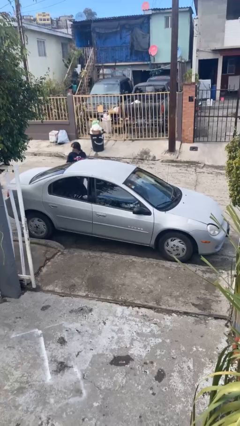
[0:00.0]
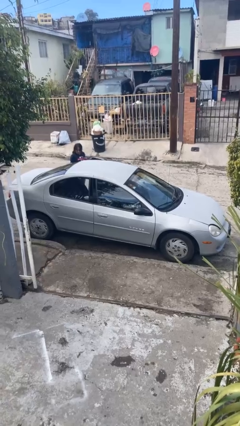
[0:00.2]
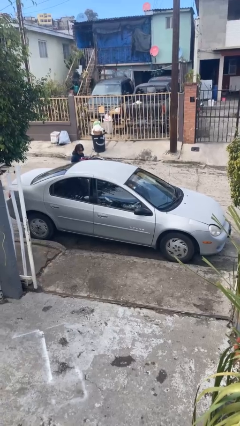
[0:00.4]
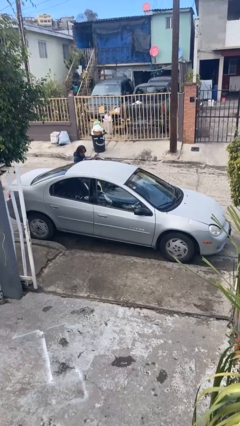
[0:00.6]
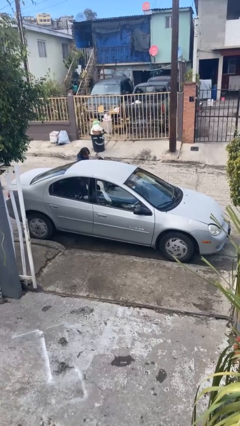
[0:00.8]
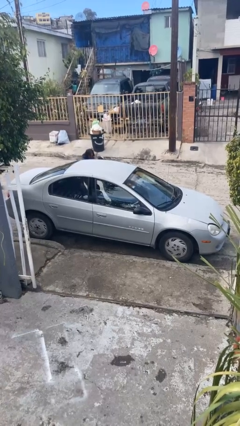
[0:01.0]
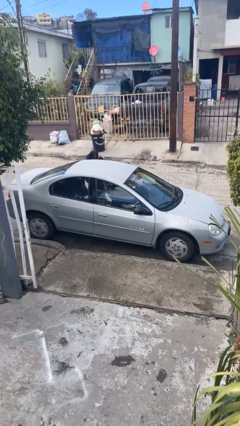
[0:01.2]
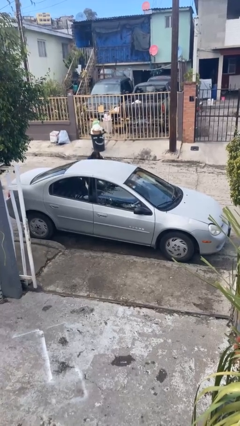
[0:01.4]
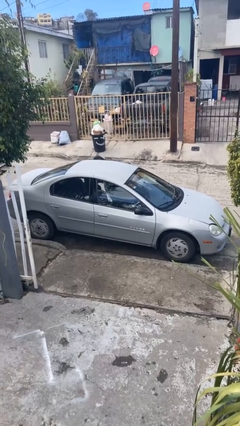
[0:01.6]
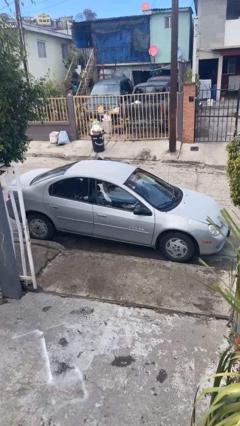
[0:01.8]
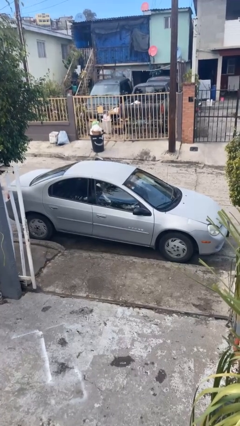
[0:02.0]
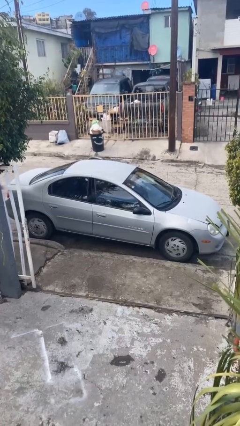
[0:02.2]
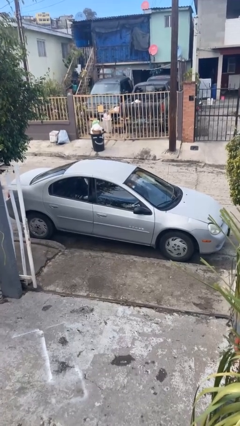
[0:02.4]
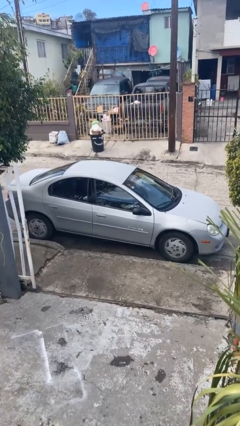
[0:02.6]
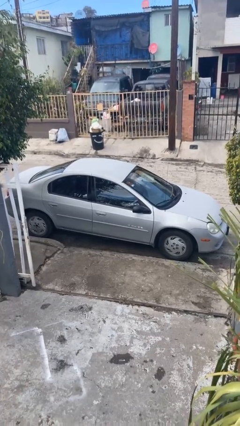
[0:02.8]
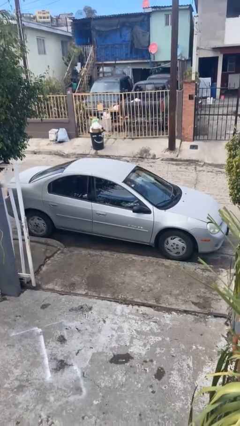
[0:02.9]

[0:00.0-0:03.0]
car picks up person

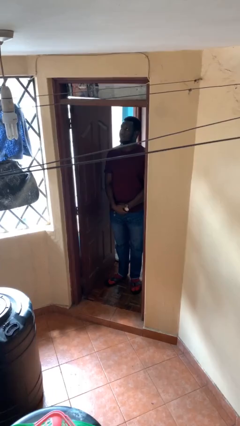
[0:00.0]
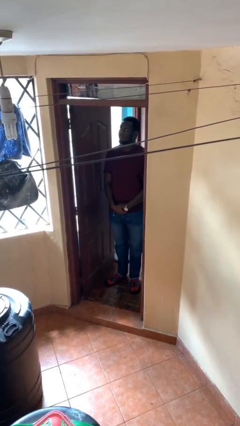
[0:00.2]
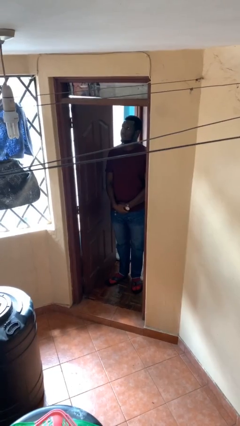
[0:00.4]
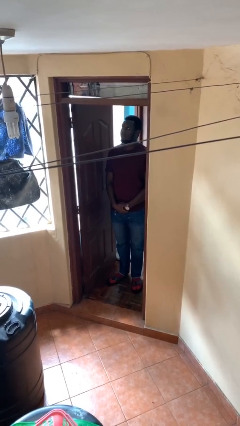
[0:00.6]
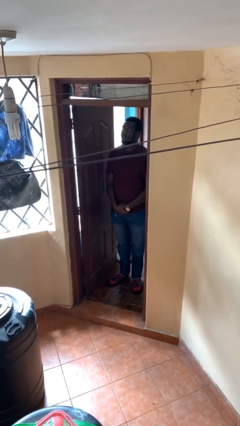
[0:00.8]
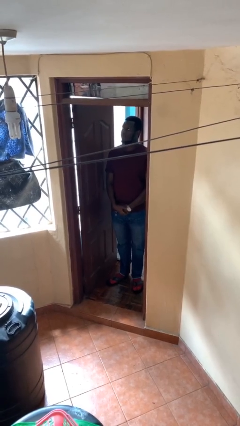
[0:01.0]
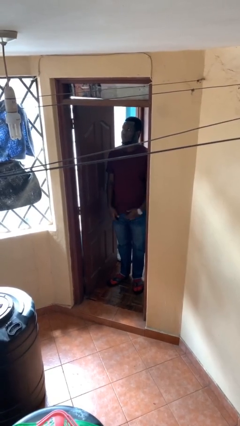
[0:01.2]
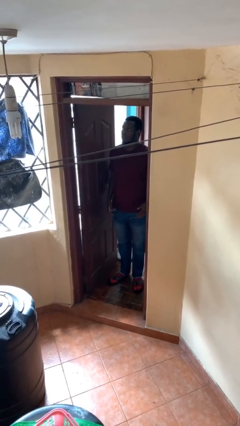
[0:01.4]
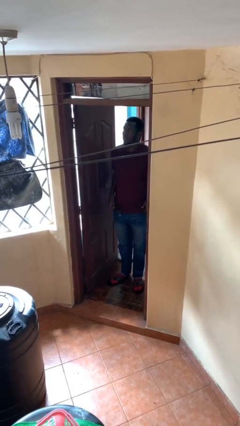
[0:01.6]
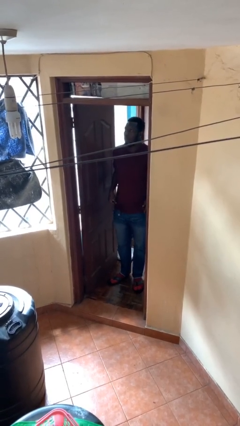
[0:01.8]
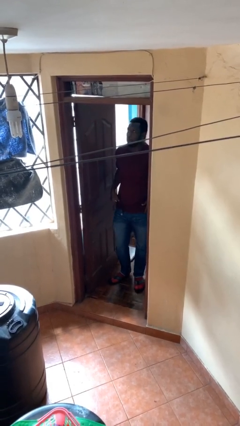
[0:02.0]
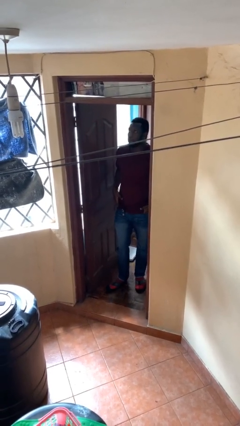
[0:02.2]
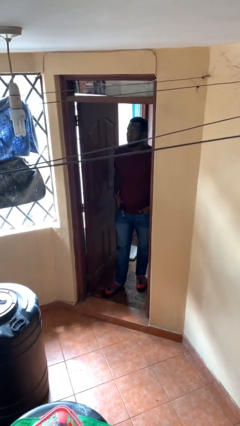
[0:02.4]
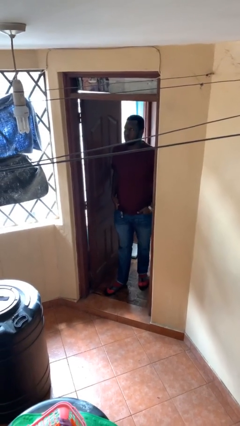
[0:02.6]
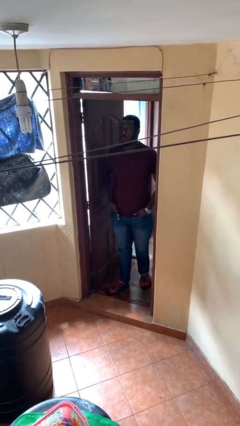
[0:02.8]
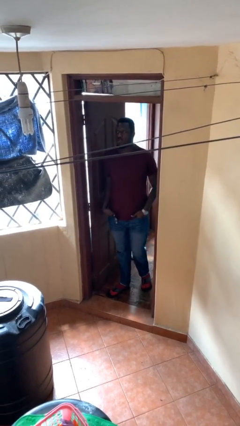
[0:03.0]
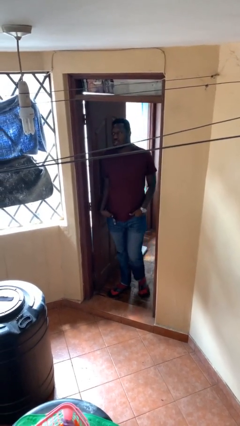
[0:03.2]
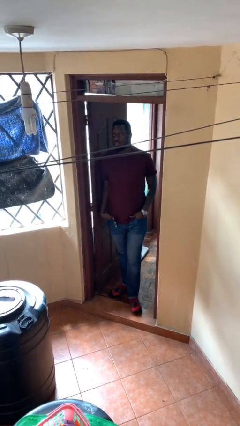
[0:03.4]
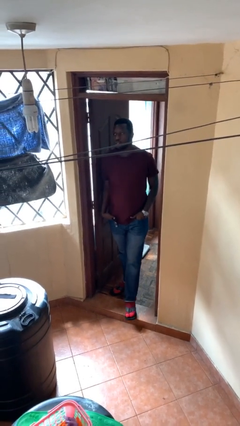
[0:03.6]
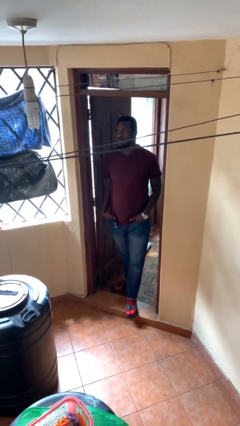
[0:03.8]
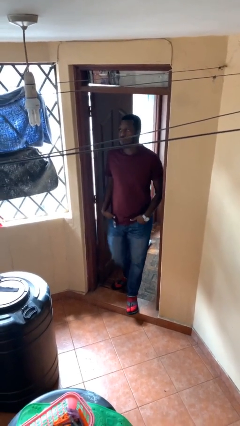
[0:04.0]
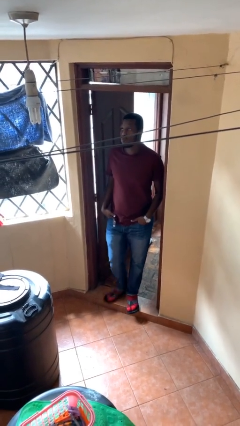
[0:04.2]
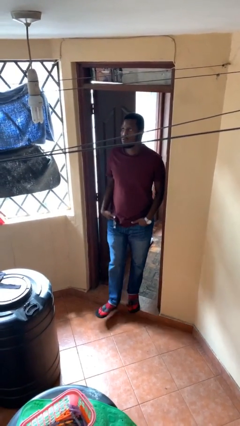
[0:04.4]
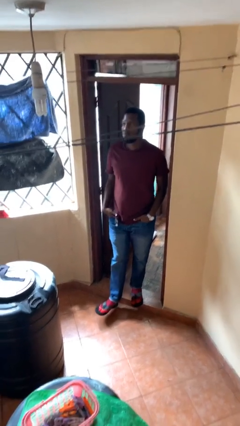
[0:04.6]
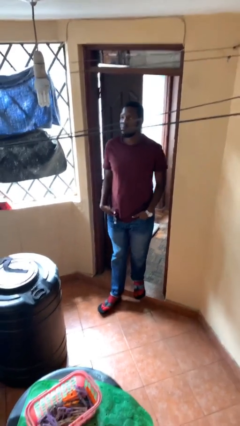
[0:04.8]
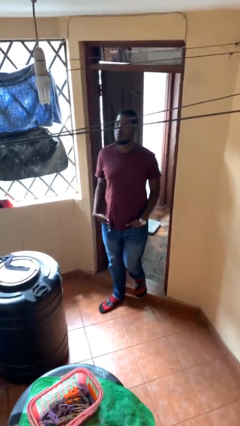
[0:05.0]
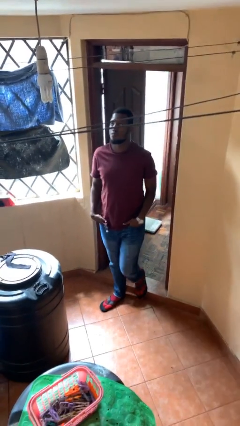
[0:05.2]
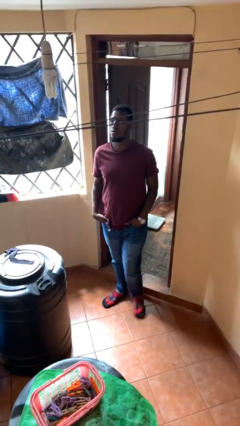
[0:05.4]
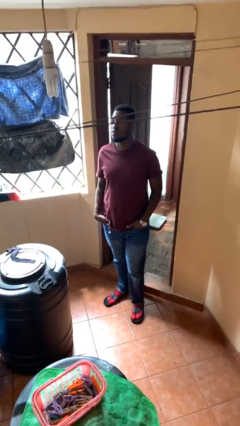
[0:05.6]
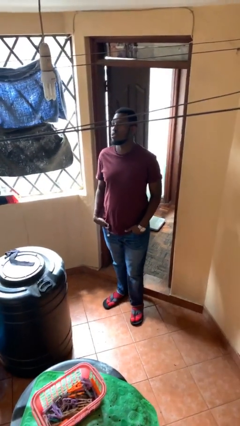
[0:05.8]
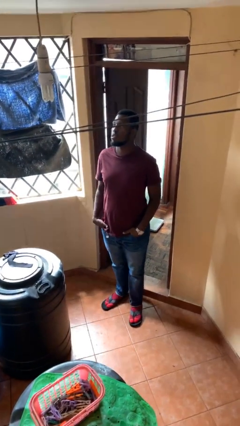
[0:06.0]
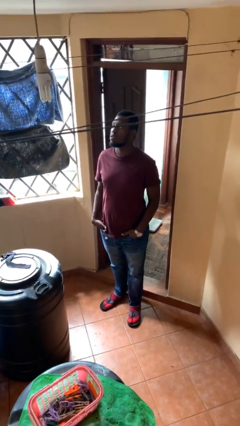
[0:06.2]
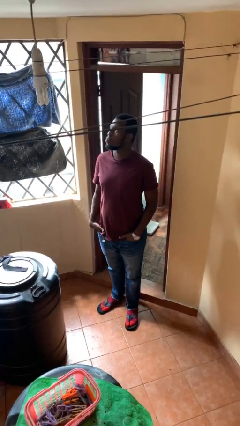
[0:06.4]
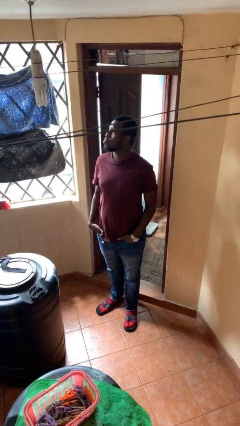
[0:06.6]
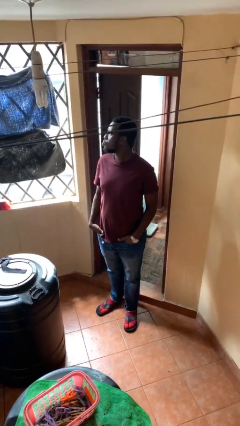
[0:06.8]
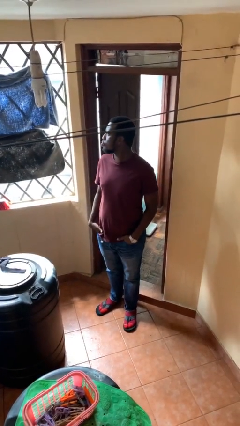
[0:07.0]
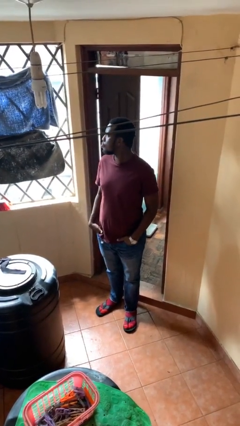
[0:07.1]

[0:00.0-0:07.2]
person enters scene through structure

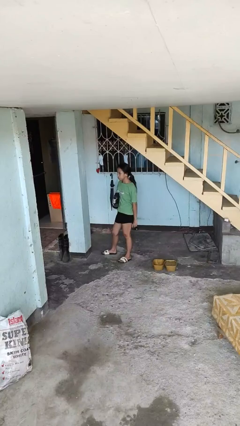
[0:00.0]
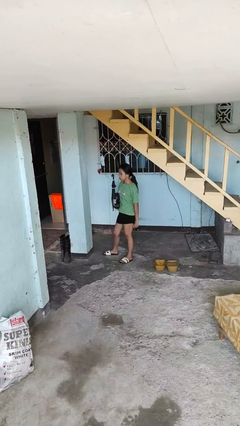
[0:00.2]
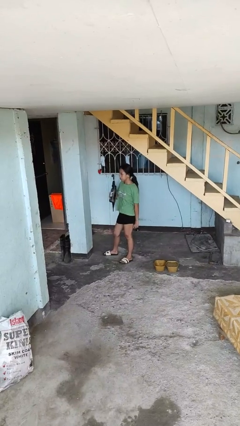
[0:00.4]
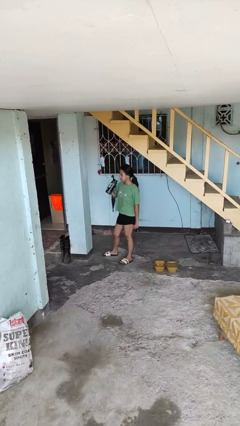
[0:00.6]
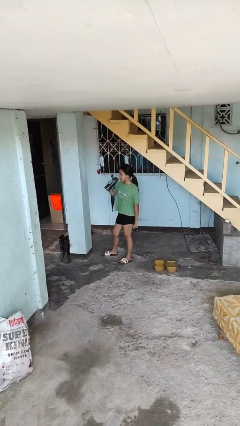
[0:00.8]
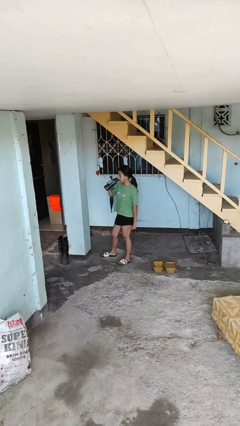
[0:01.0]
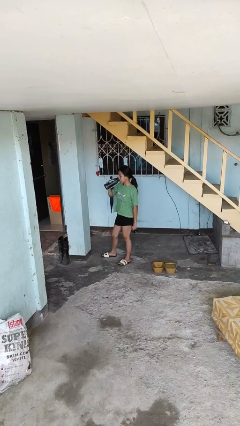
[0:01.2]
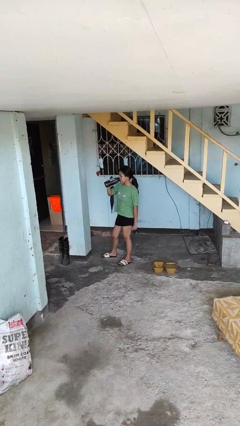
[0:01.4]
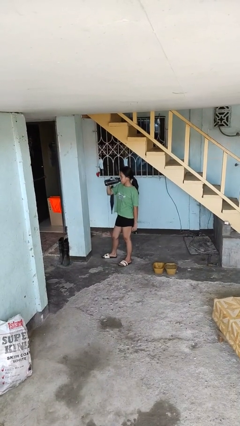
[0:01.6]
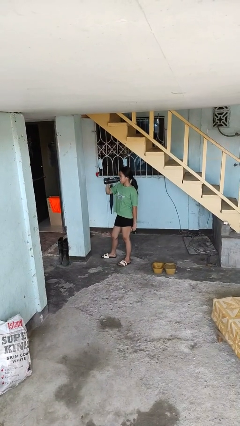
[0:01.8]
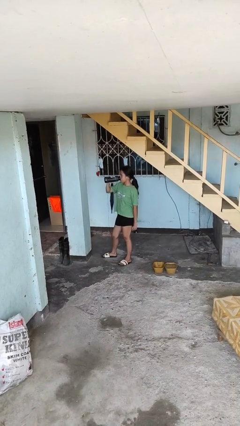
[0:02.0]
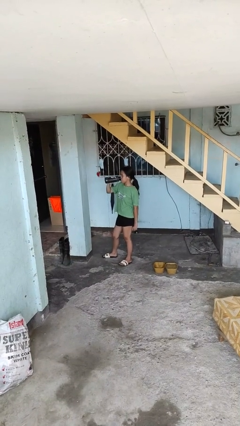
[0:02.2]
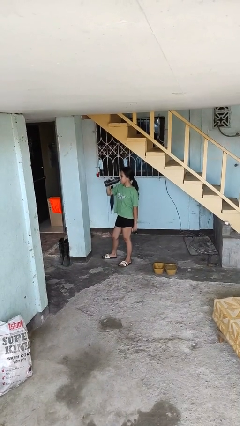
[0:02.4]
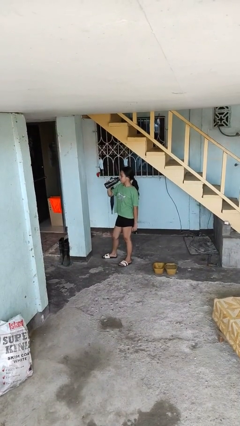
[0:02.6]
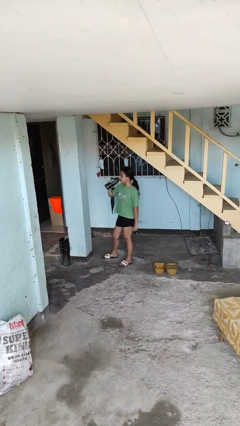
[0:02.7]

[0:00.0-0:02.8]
person drinks from bottle

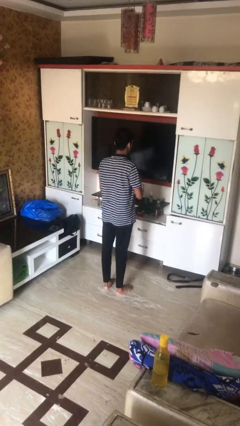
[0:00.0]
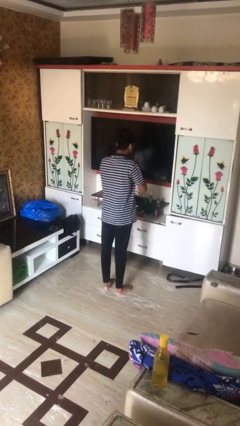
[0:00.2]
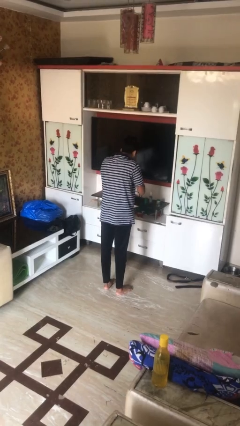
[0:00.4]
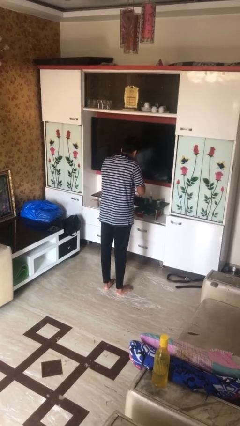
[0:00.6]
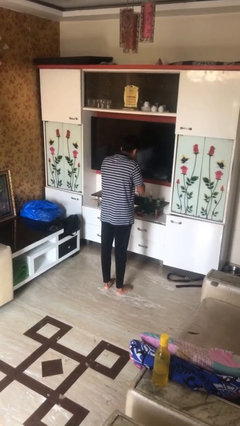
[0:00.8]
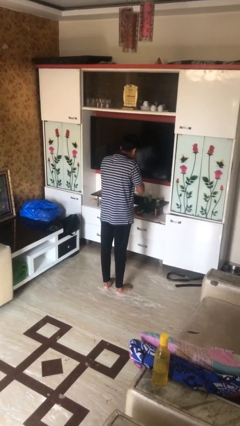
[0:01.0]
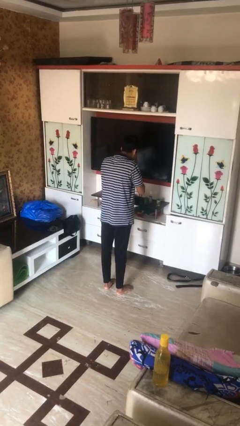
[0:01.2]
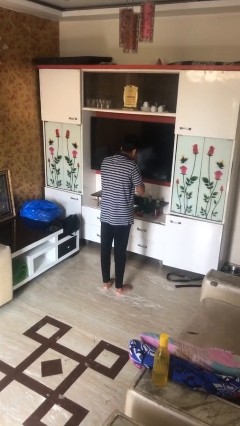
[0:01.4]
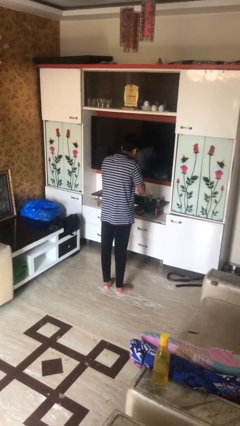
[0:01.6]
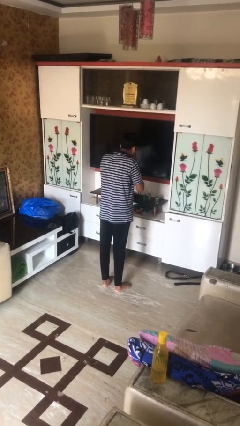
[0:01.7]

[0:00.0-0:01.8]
person sneezes into hand

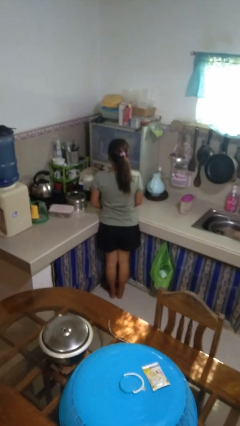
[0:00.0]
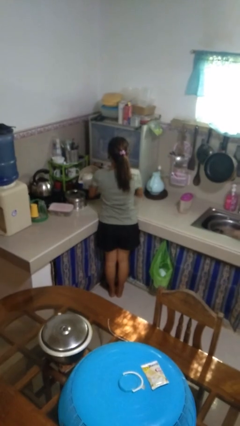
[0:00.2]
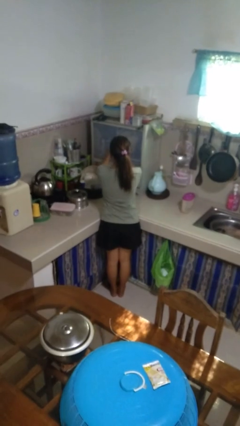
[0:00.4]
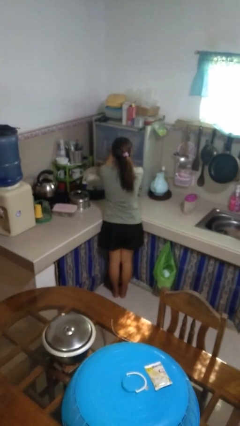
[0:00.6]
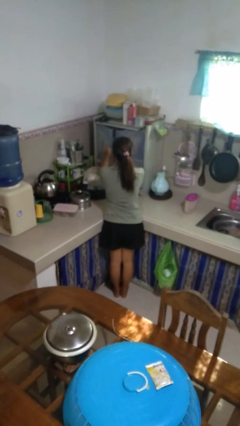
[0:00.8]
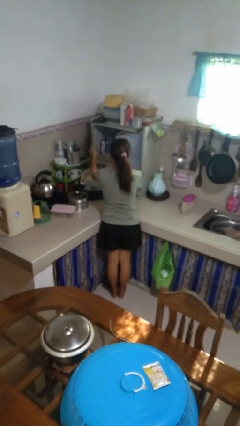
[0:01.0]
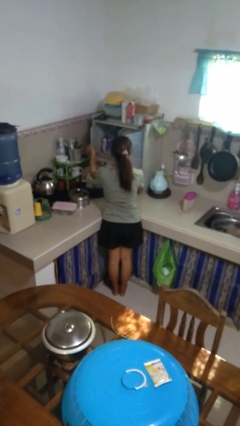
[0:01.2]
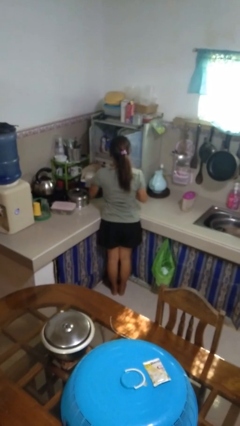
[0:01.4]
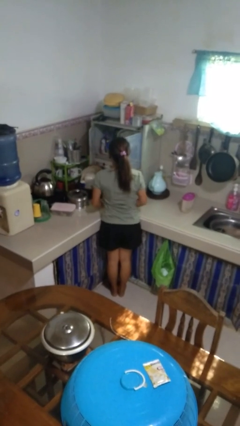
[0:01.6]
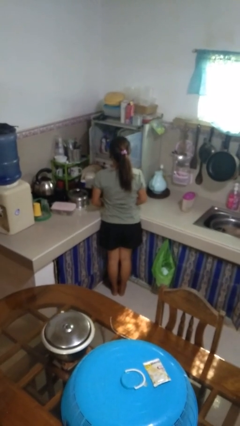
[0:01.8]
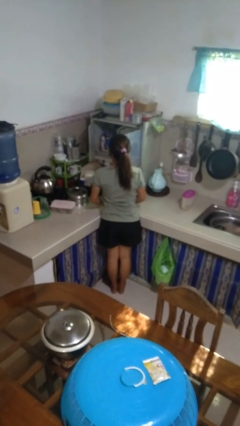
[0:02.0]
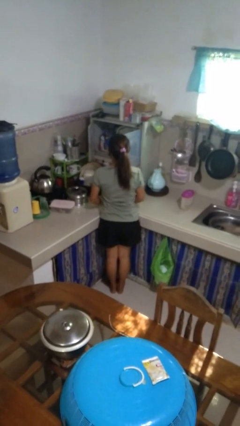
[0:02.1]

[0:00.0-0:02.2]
person opens kitchen drawer

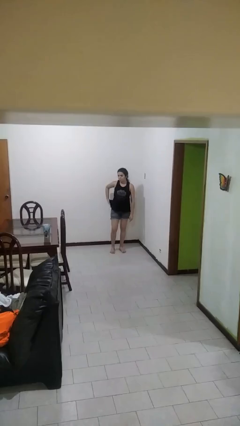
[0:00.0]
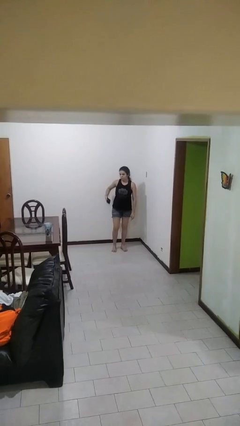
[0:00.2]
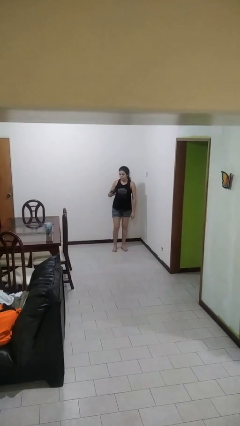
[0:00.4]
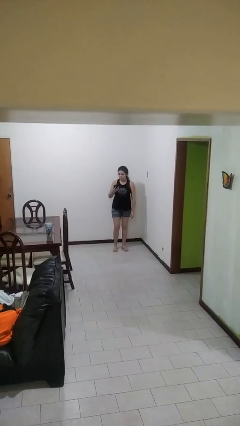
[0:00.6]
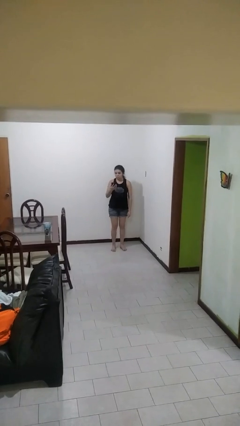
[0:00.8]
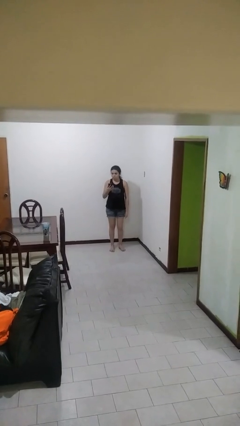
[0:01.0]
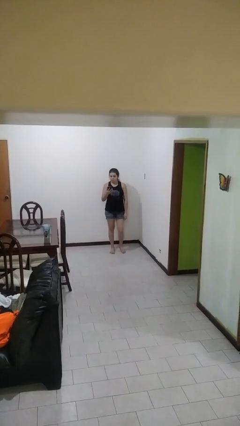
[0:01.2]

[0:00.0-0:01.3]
person takes phone from pocket
